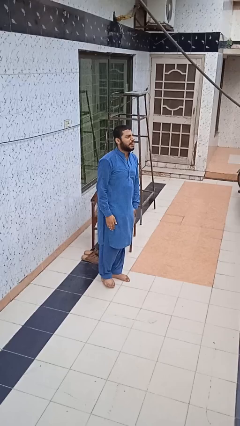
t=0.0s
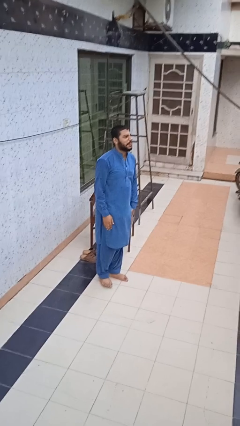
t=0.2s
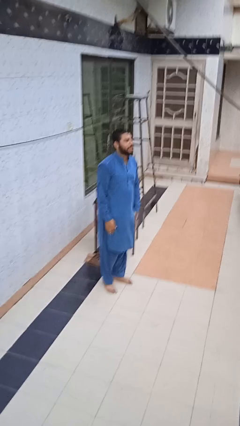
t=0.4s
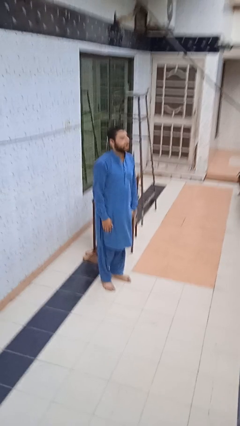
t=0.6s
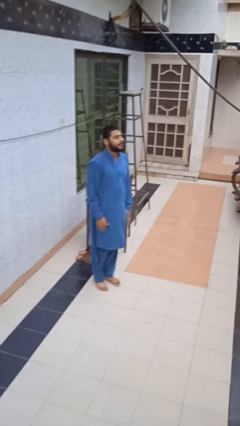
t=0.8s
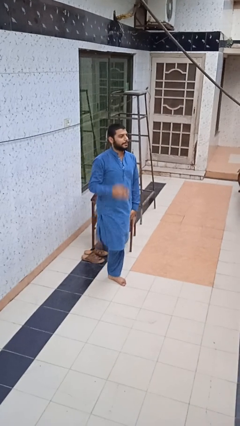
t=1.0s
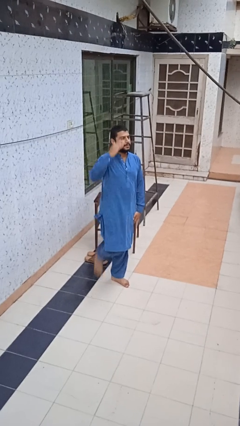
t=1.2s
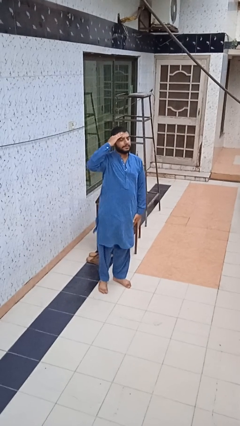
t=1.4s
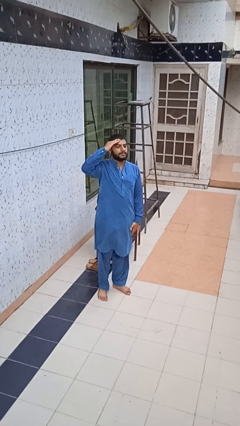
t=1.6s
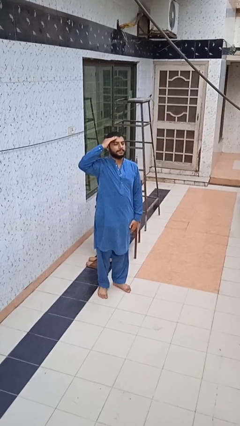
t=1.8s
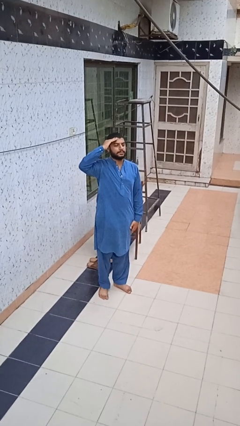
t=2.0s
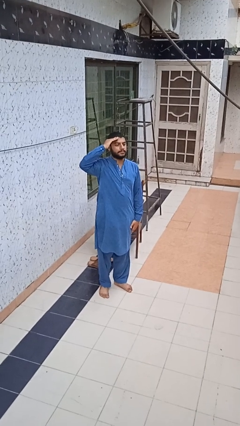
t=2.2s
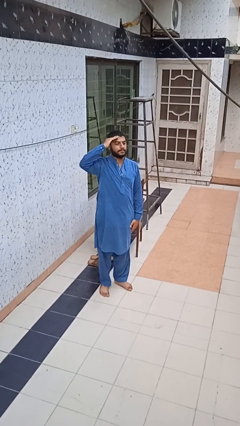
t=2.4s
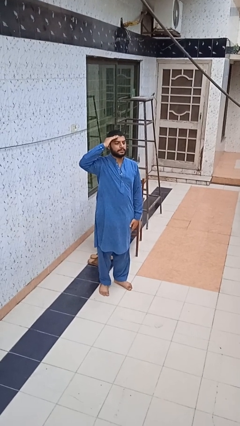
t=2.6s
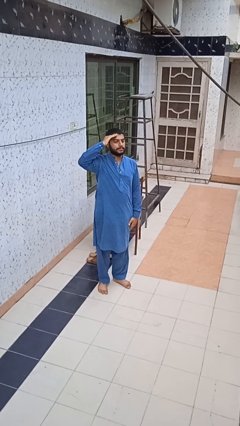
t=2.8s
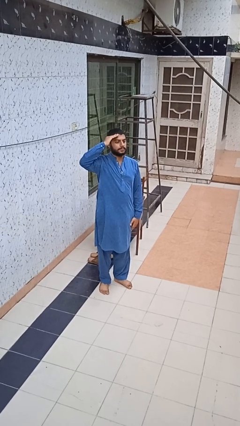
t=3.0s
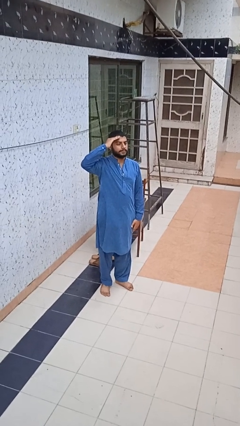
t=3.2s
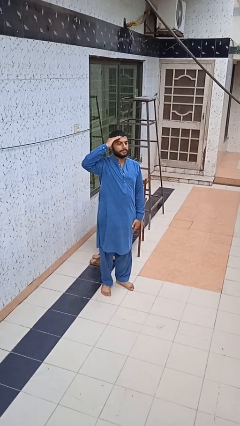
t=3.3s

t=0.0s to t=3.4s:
person salutes

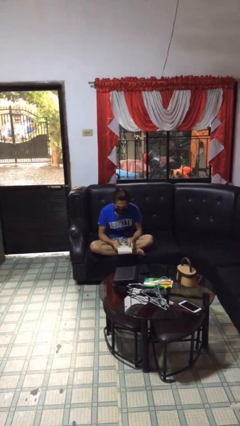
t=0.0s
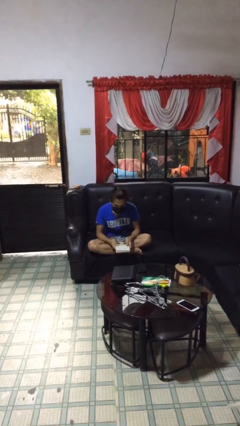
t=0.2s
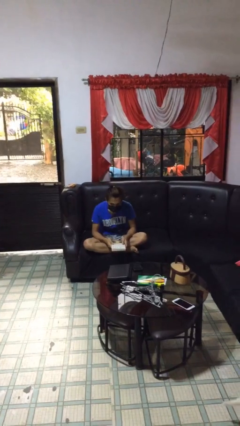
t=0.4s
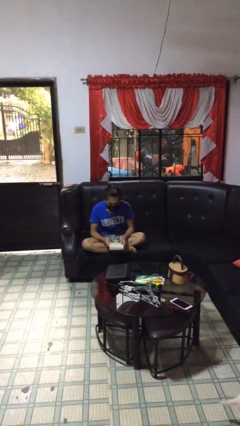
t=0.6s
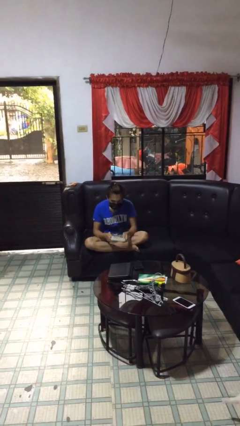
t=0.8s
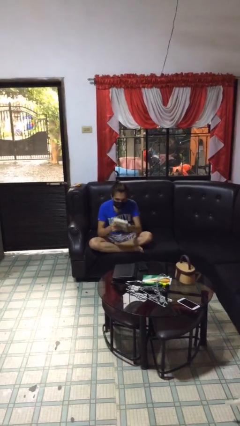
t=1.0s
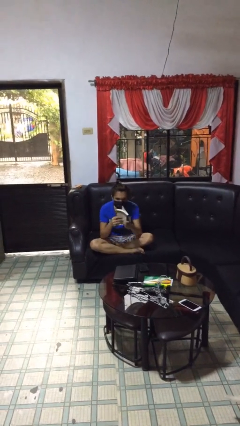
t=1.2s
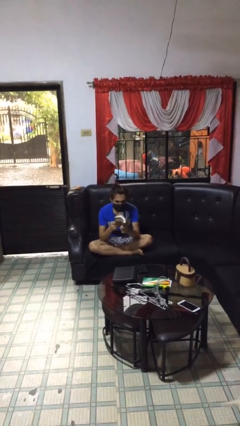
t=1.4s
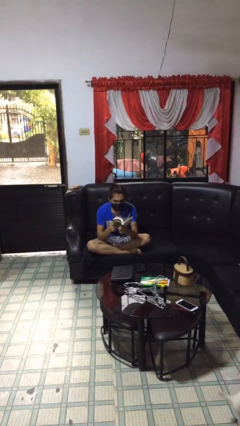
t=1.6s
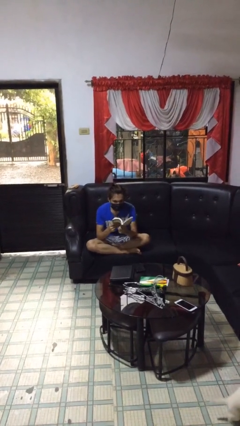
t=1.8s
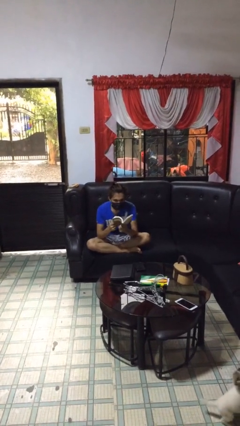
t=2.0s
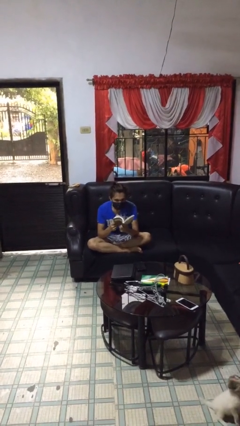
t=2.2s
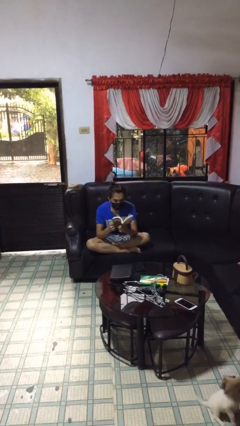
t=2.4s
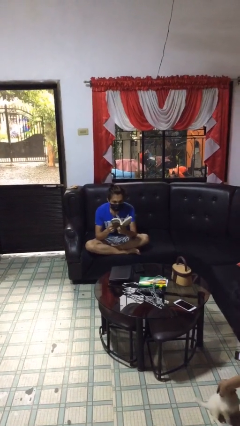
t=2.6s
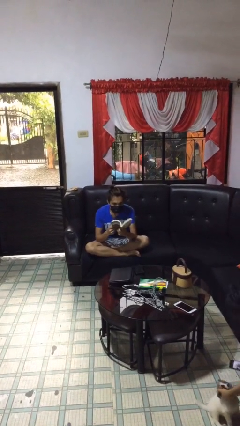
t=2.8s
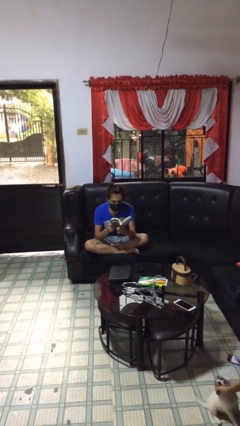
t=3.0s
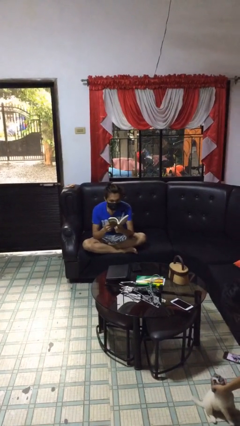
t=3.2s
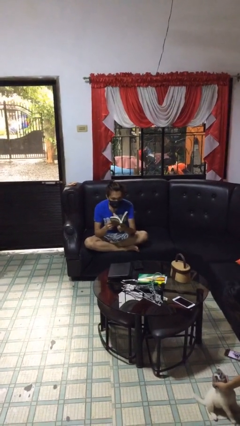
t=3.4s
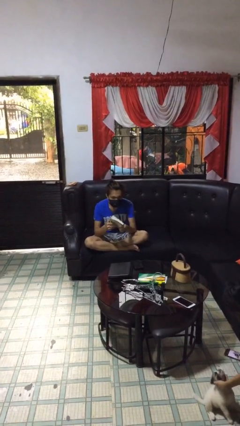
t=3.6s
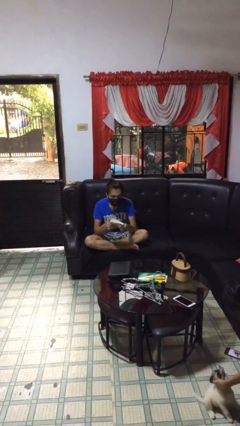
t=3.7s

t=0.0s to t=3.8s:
person reads document

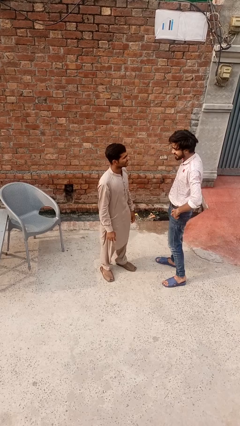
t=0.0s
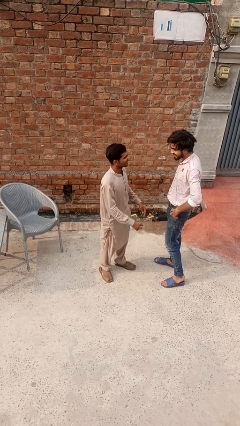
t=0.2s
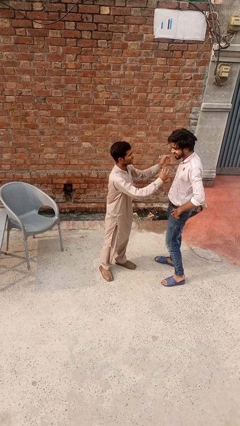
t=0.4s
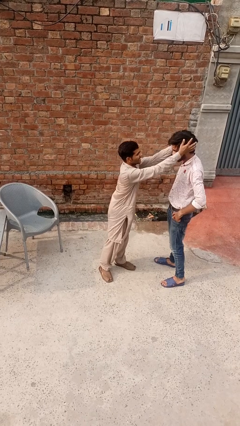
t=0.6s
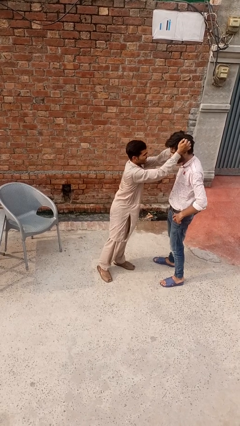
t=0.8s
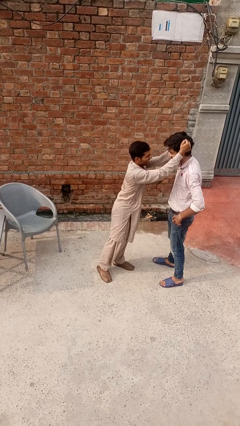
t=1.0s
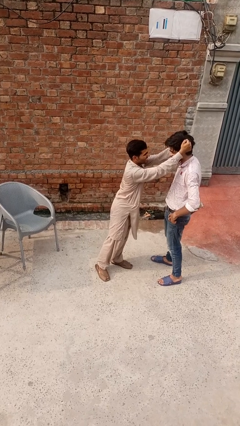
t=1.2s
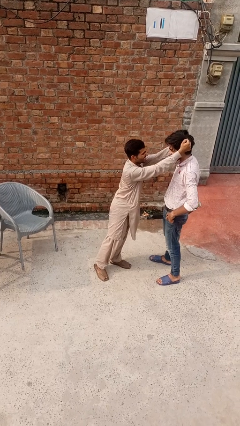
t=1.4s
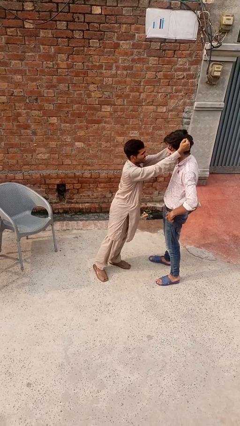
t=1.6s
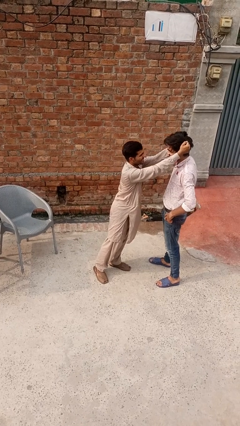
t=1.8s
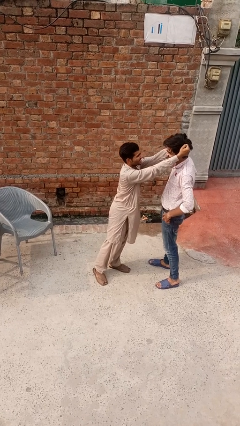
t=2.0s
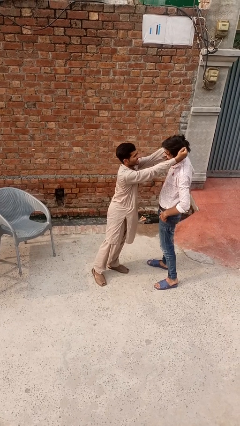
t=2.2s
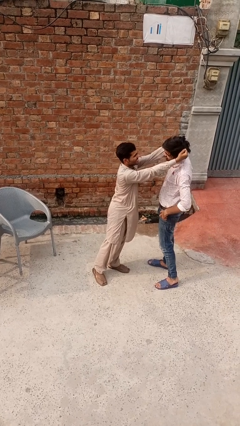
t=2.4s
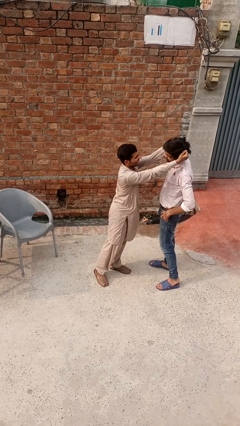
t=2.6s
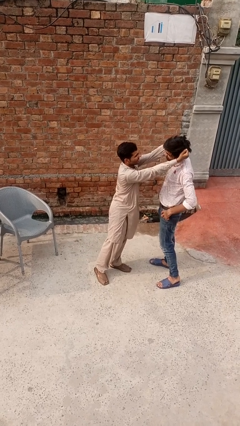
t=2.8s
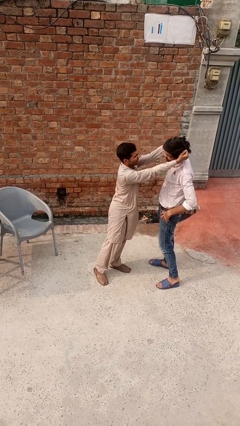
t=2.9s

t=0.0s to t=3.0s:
person grabs person by hair

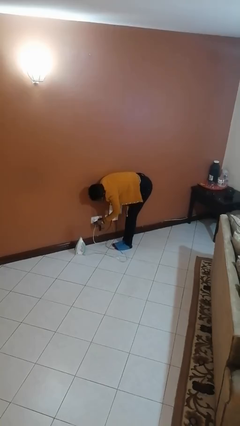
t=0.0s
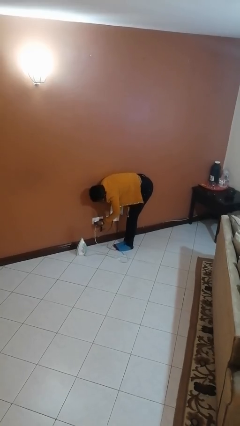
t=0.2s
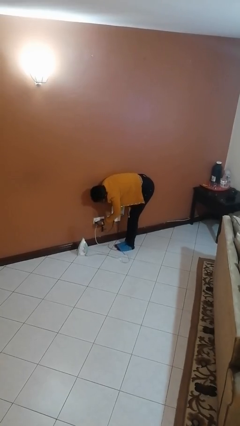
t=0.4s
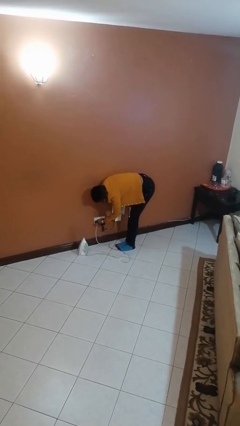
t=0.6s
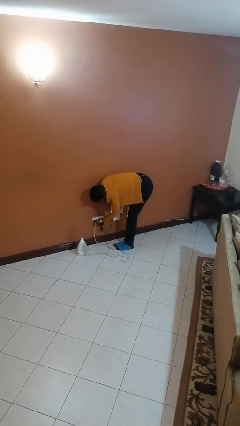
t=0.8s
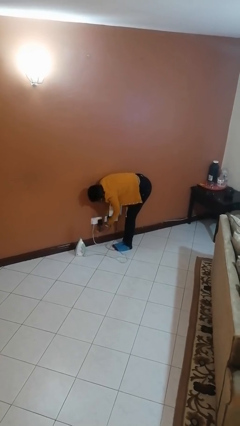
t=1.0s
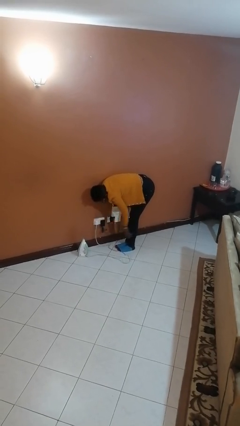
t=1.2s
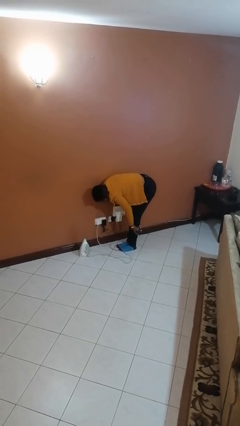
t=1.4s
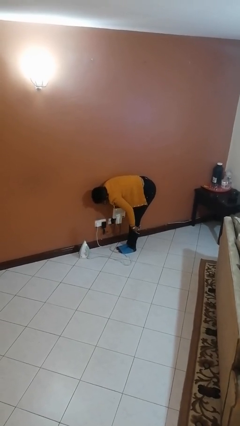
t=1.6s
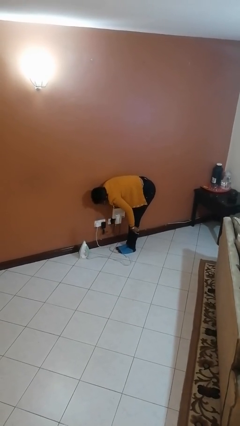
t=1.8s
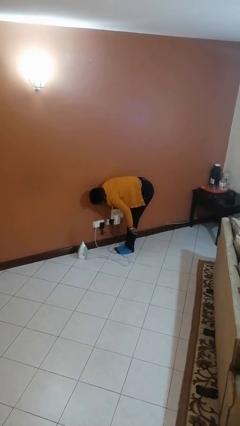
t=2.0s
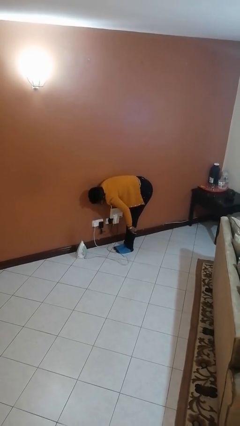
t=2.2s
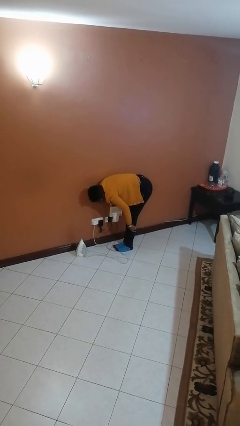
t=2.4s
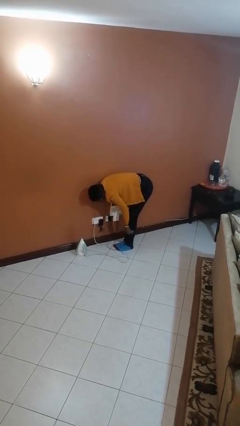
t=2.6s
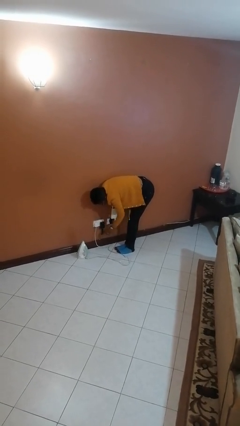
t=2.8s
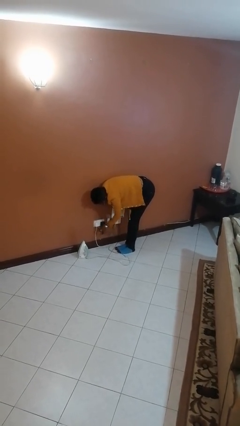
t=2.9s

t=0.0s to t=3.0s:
person plugs into electrical socket

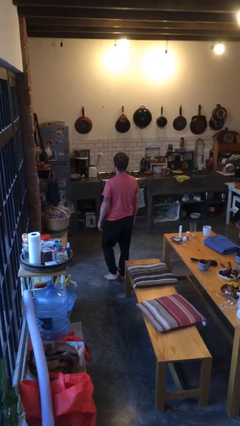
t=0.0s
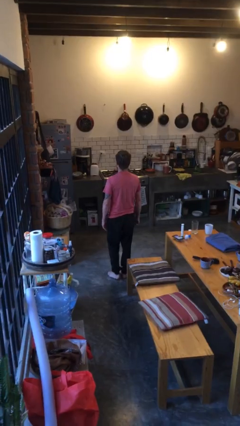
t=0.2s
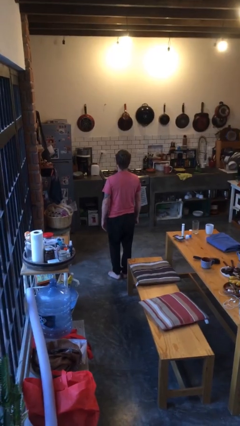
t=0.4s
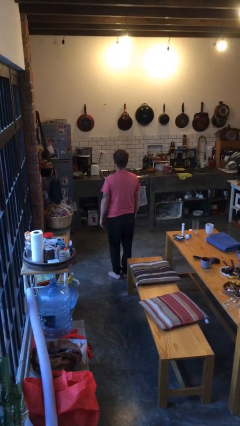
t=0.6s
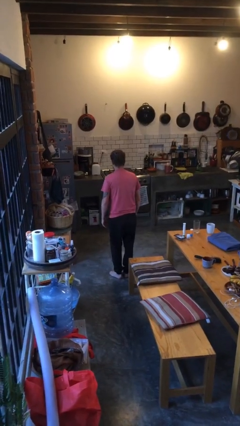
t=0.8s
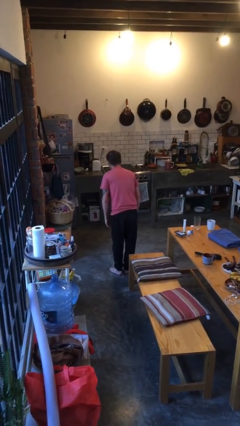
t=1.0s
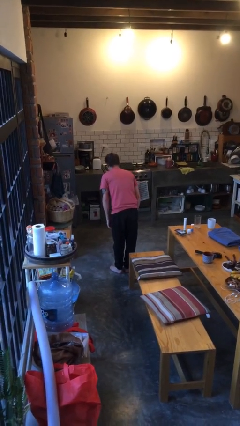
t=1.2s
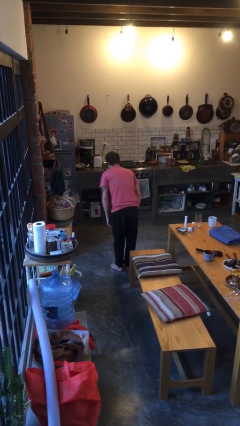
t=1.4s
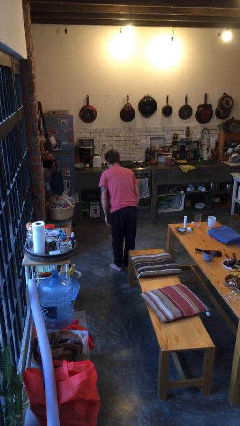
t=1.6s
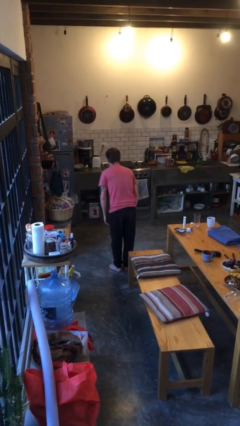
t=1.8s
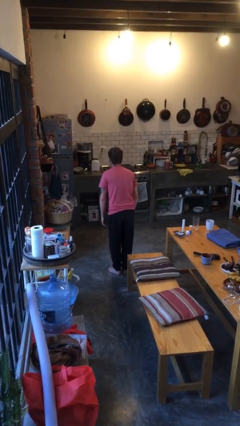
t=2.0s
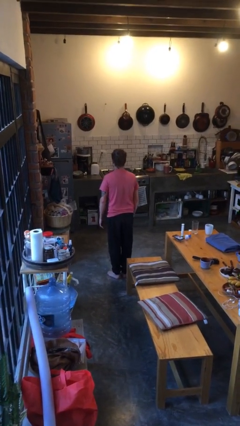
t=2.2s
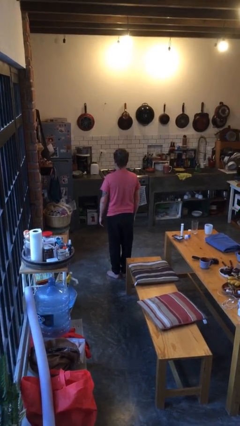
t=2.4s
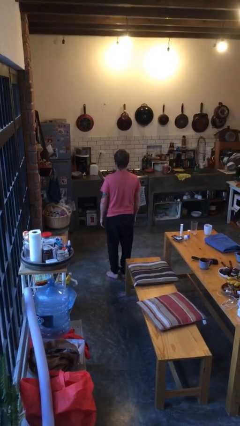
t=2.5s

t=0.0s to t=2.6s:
person bows

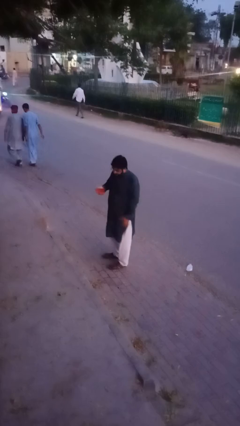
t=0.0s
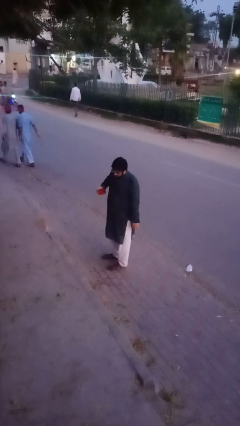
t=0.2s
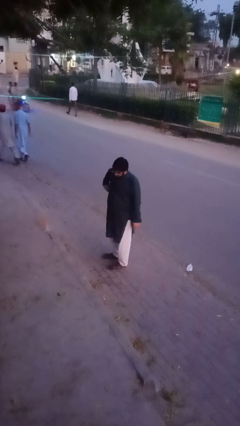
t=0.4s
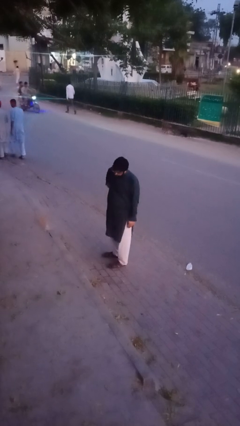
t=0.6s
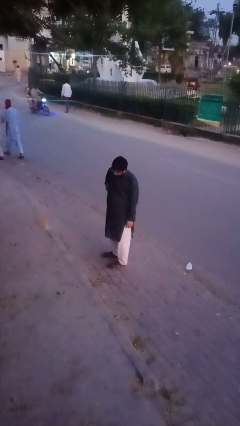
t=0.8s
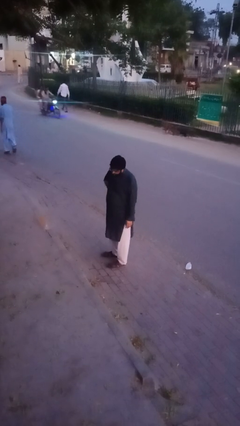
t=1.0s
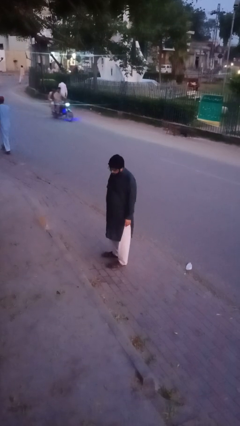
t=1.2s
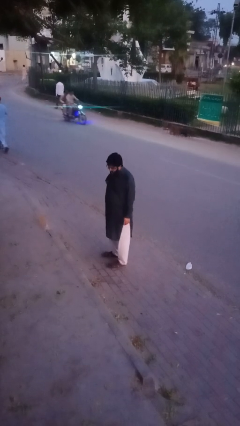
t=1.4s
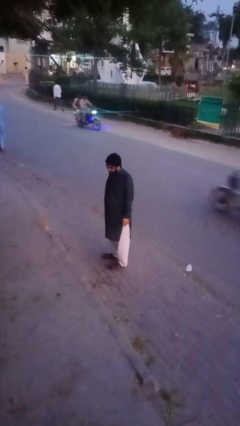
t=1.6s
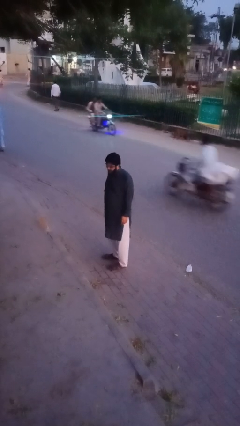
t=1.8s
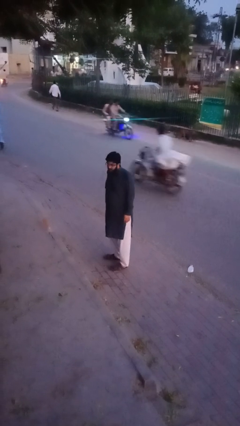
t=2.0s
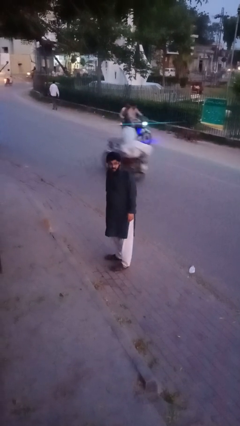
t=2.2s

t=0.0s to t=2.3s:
person puts phone into pocket
